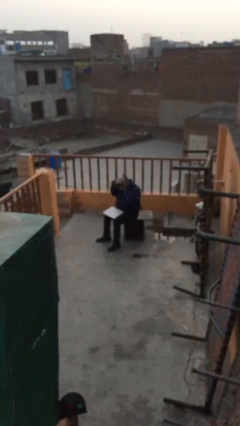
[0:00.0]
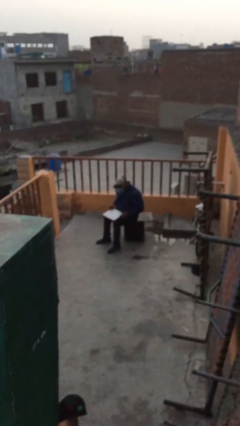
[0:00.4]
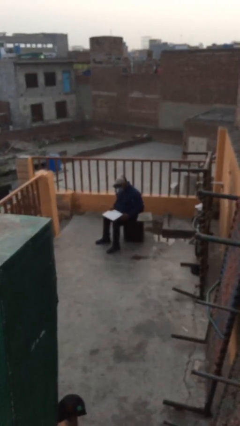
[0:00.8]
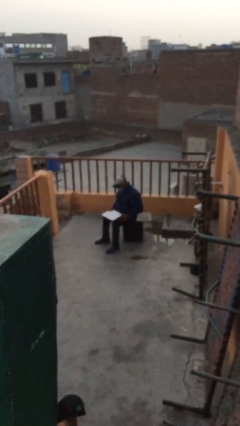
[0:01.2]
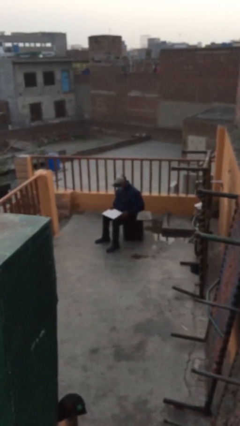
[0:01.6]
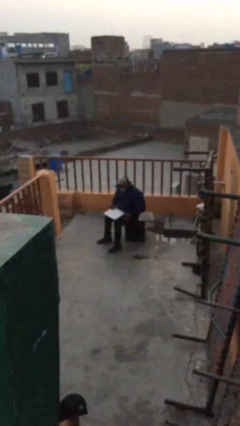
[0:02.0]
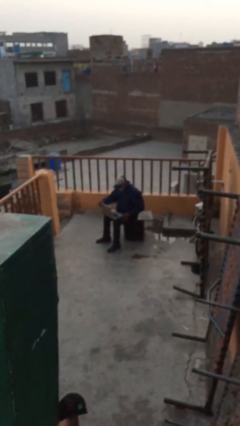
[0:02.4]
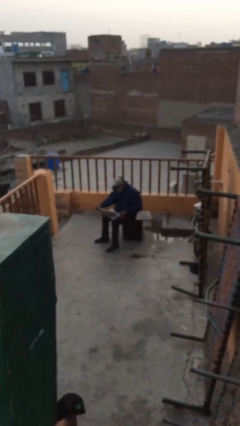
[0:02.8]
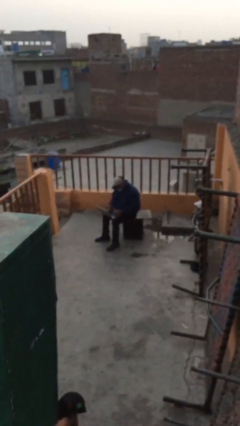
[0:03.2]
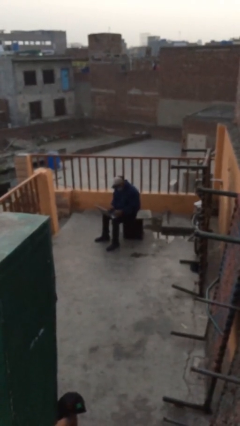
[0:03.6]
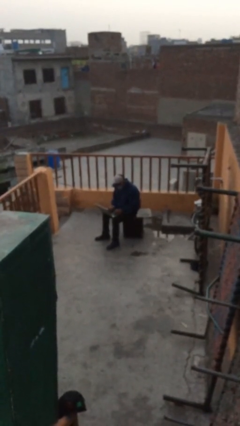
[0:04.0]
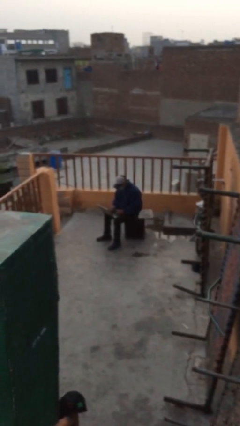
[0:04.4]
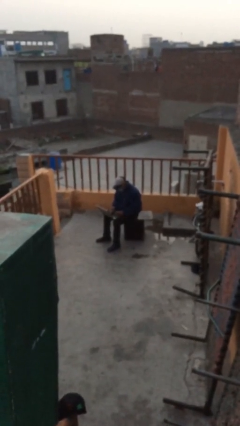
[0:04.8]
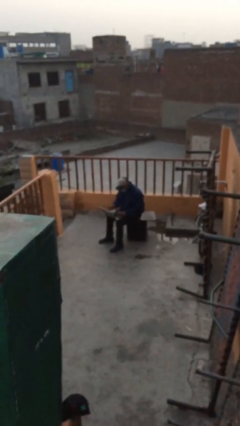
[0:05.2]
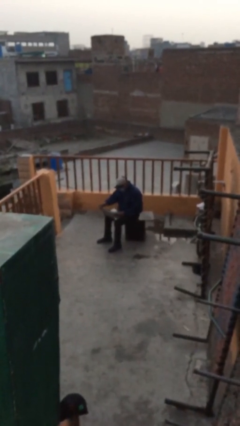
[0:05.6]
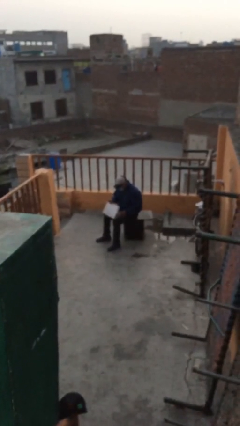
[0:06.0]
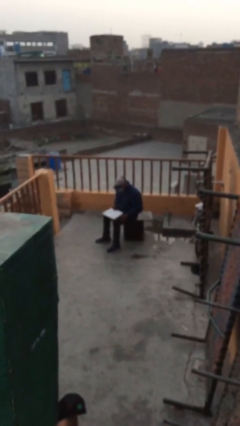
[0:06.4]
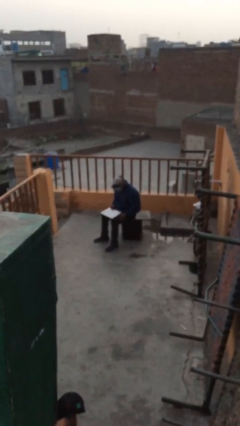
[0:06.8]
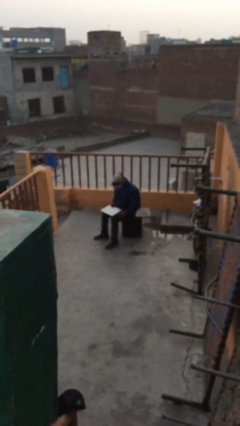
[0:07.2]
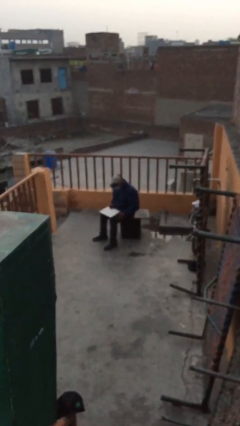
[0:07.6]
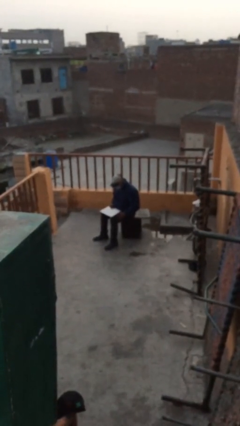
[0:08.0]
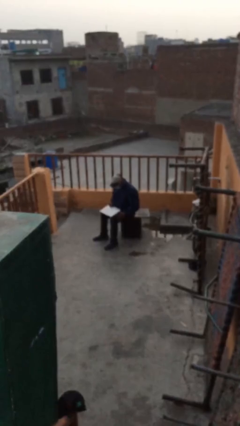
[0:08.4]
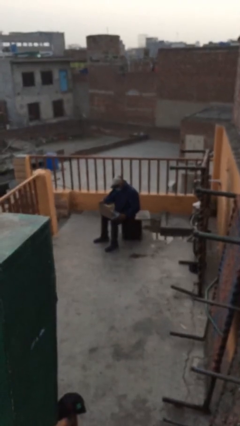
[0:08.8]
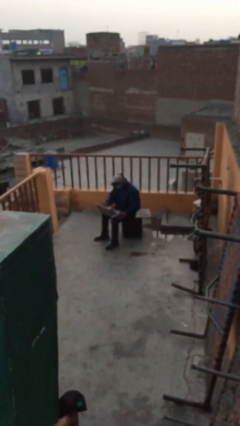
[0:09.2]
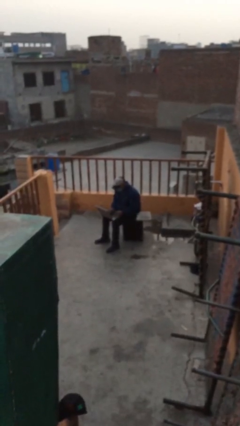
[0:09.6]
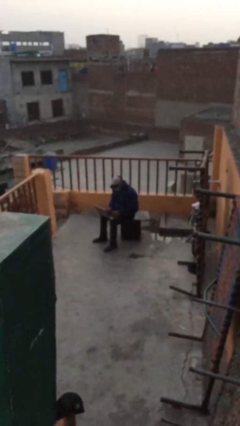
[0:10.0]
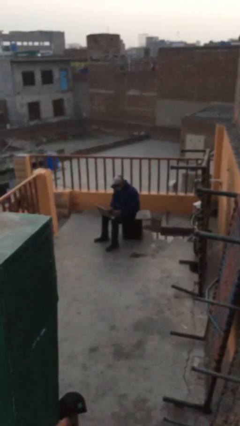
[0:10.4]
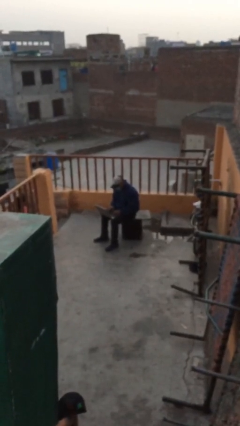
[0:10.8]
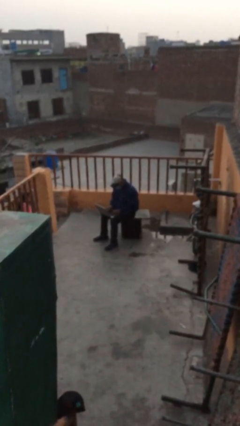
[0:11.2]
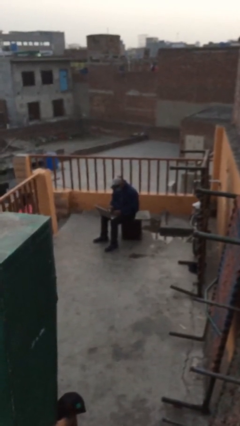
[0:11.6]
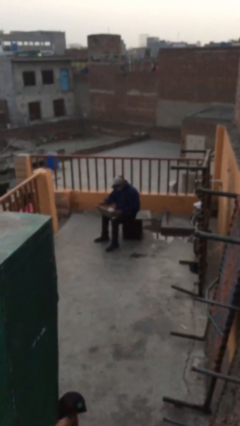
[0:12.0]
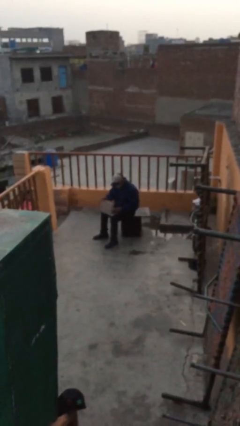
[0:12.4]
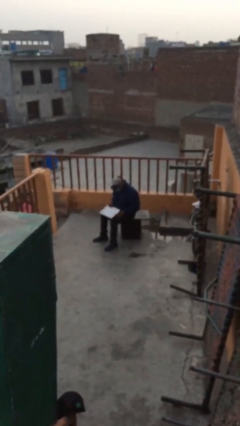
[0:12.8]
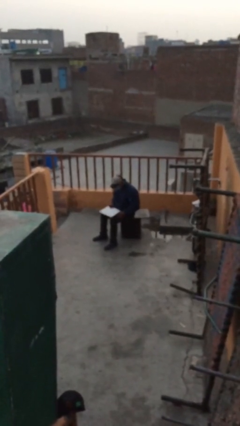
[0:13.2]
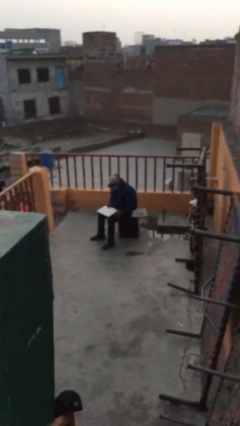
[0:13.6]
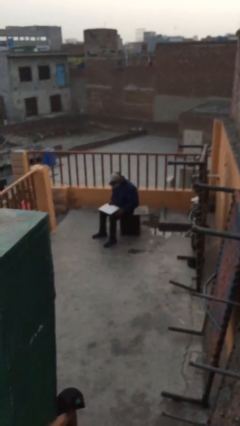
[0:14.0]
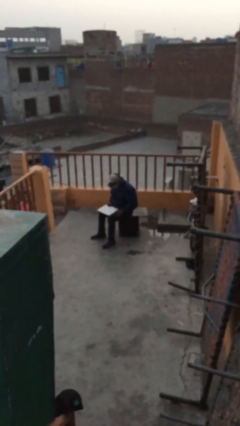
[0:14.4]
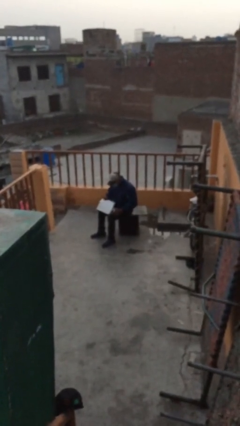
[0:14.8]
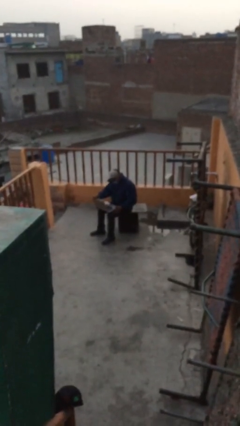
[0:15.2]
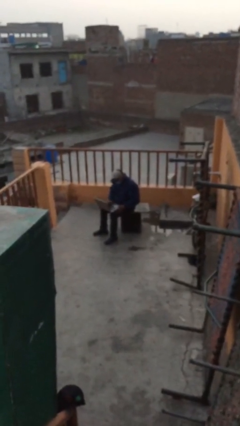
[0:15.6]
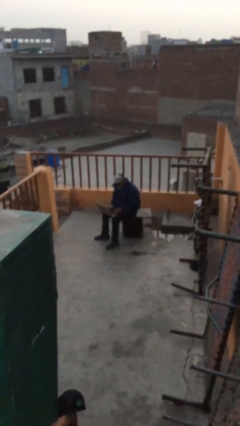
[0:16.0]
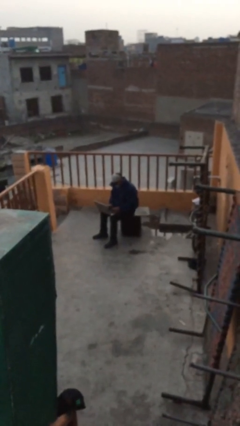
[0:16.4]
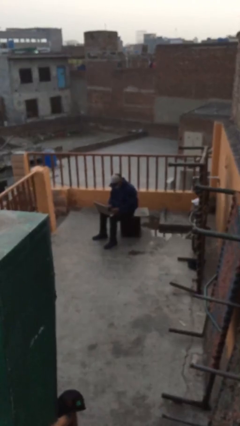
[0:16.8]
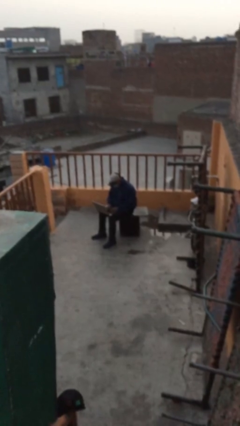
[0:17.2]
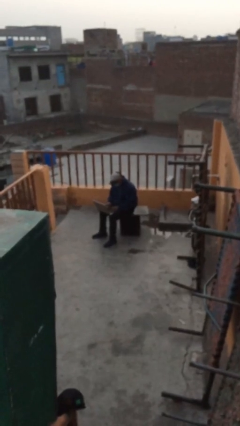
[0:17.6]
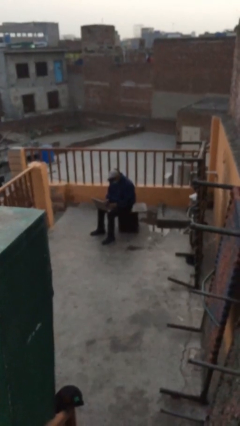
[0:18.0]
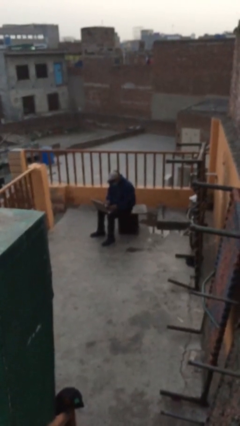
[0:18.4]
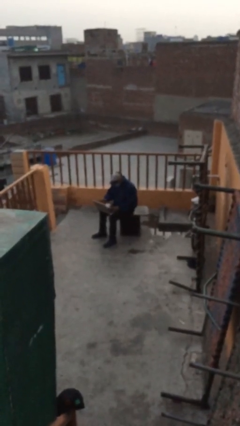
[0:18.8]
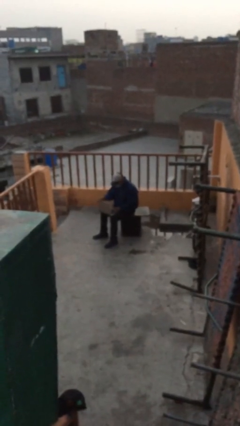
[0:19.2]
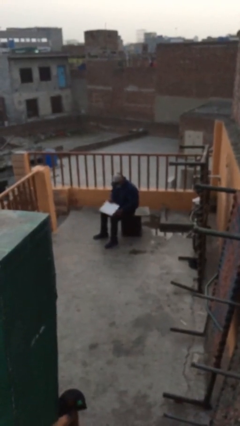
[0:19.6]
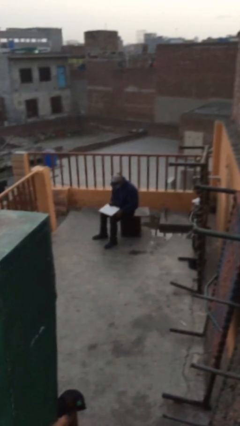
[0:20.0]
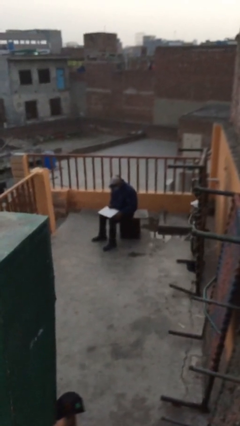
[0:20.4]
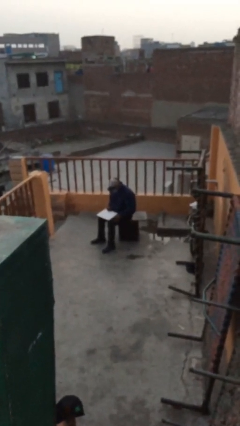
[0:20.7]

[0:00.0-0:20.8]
person interacts with laptop

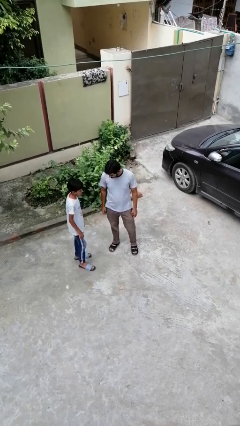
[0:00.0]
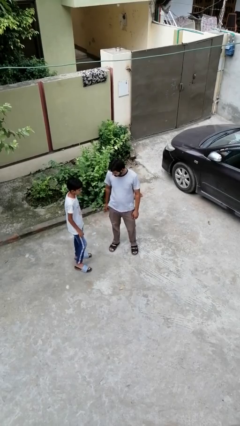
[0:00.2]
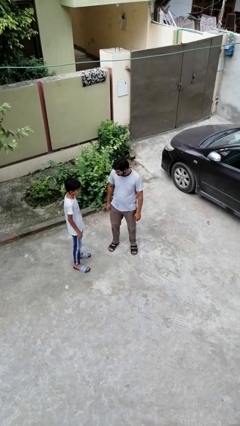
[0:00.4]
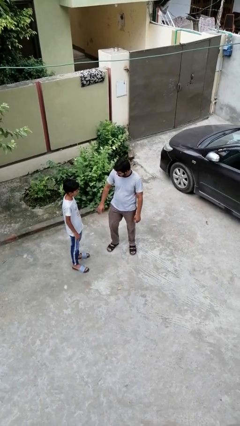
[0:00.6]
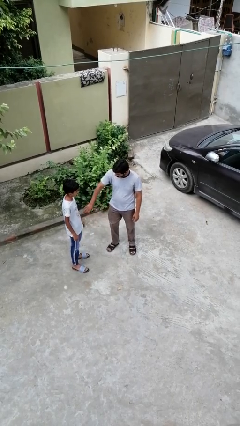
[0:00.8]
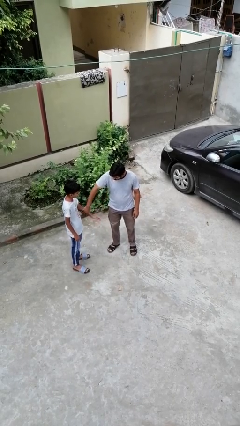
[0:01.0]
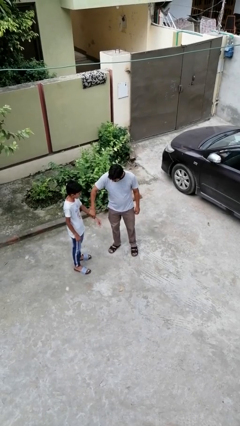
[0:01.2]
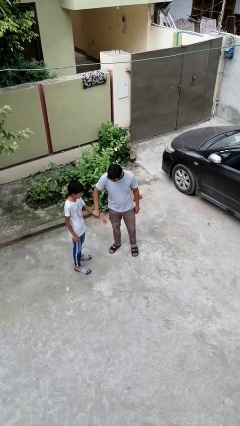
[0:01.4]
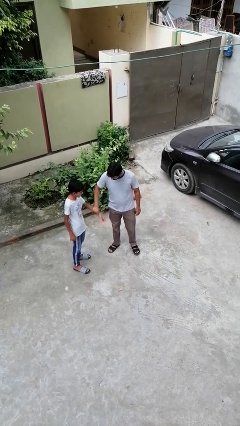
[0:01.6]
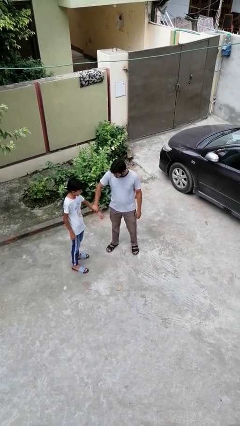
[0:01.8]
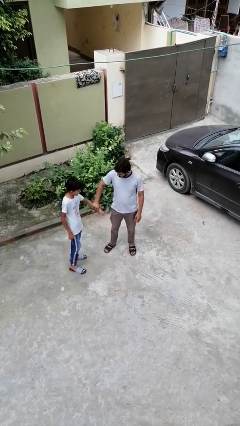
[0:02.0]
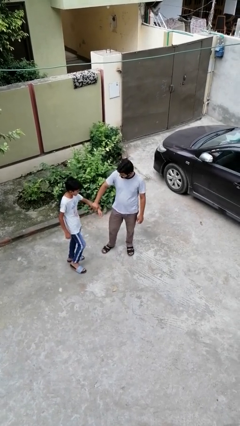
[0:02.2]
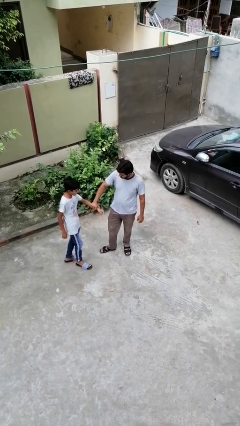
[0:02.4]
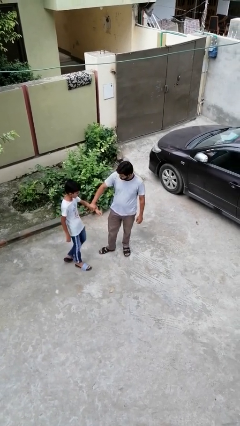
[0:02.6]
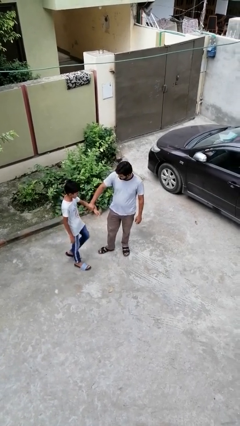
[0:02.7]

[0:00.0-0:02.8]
person grabs person by forearm

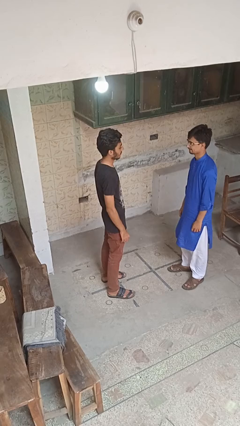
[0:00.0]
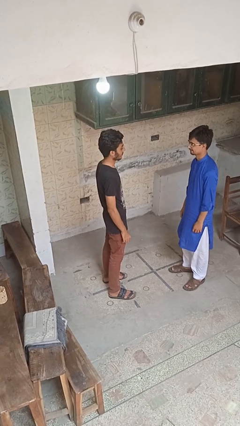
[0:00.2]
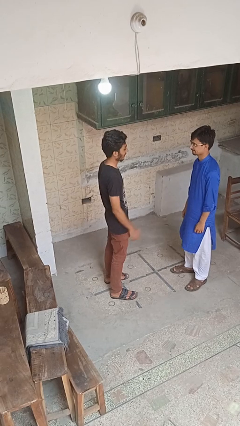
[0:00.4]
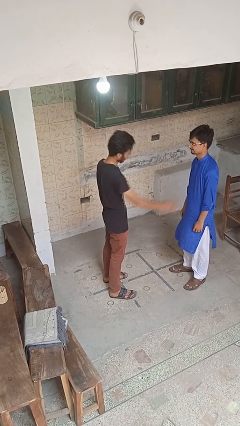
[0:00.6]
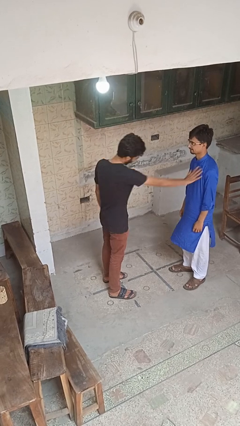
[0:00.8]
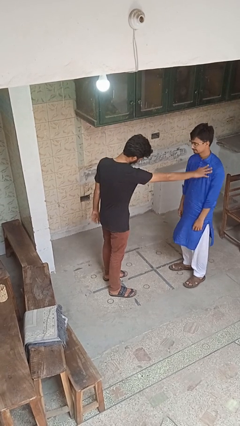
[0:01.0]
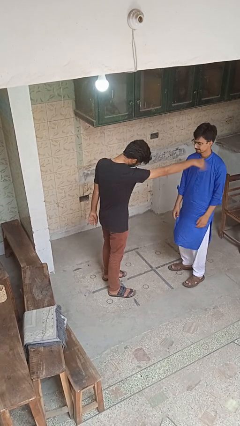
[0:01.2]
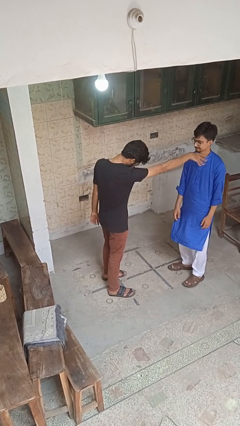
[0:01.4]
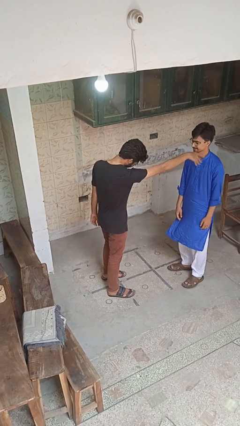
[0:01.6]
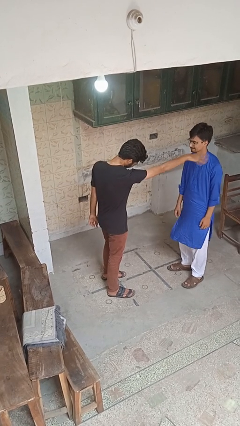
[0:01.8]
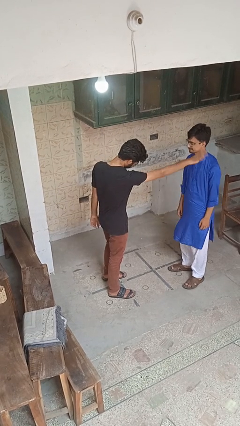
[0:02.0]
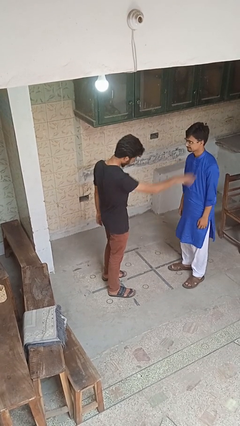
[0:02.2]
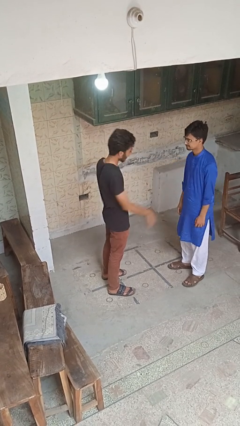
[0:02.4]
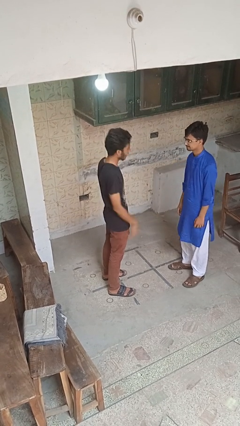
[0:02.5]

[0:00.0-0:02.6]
person shoves person

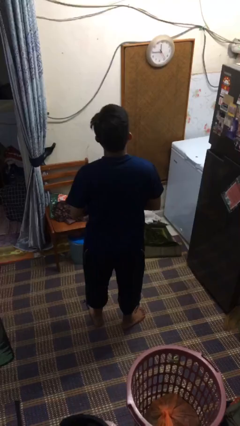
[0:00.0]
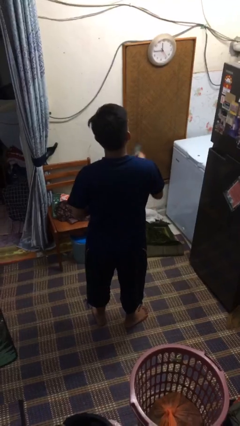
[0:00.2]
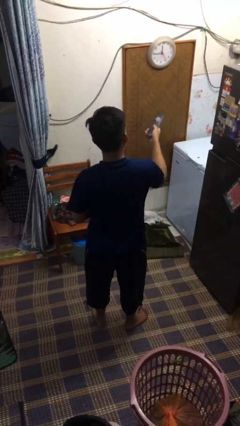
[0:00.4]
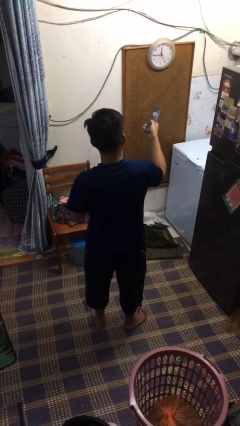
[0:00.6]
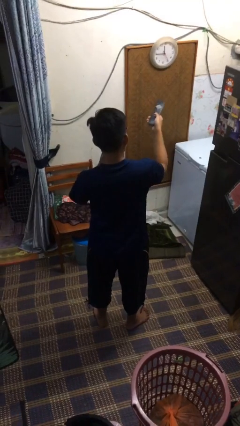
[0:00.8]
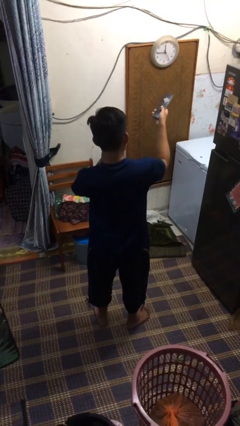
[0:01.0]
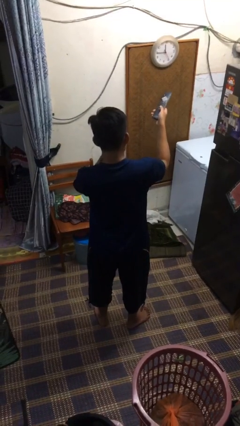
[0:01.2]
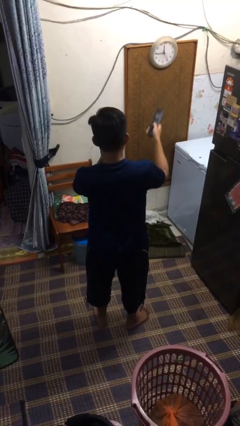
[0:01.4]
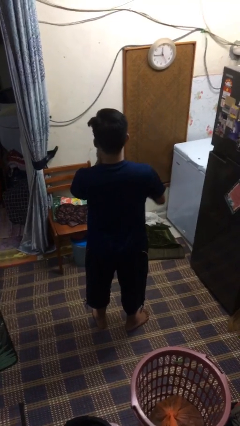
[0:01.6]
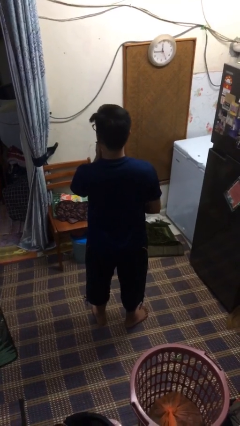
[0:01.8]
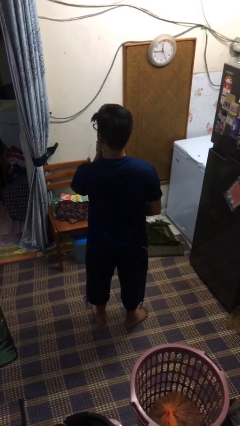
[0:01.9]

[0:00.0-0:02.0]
person uses television remote
